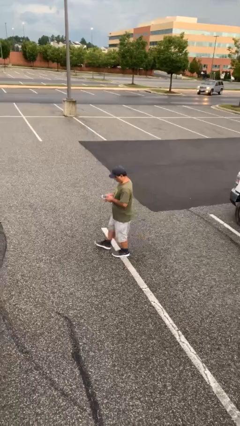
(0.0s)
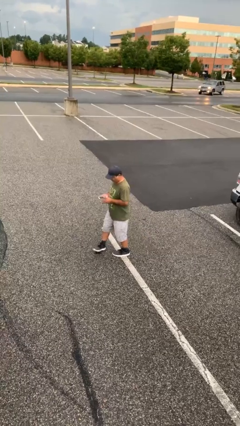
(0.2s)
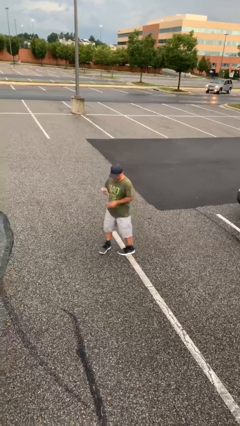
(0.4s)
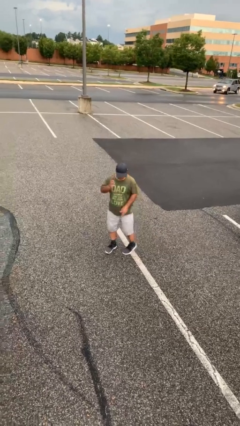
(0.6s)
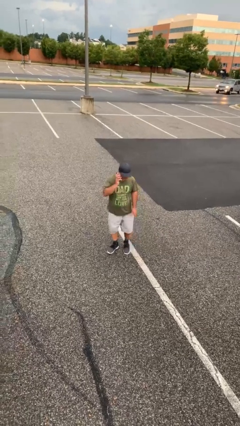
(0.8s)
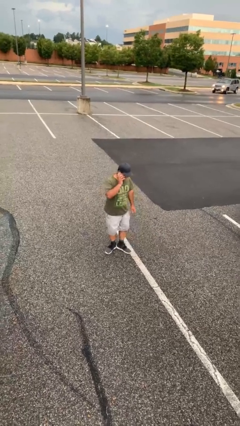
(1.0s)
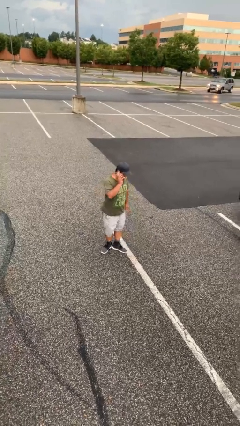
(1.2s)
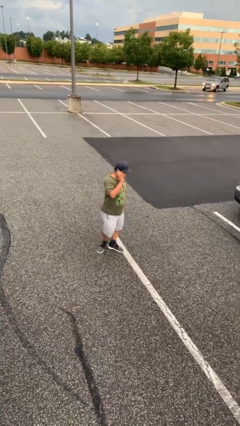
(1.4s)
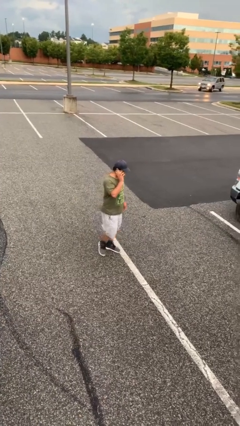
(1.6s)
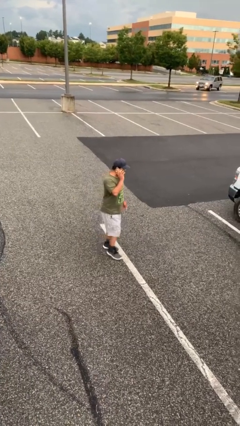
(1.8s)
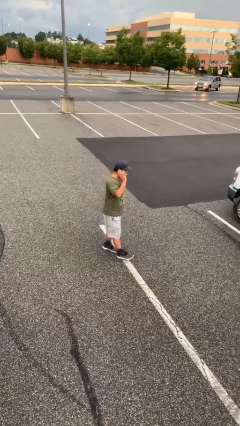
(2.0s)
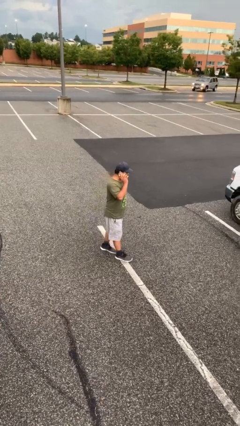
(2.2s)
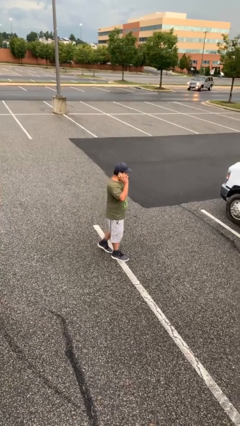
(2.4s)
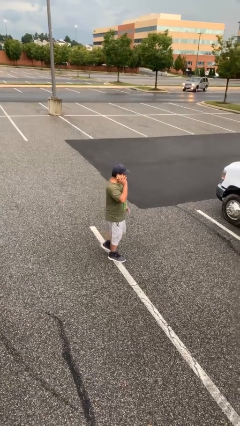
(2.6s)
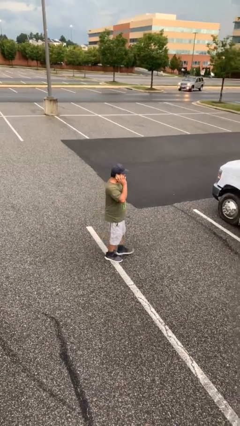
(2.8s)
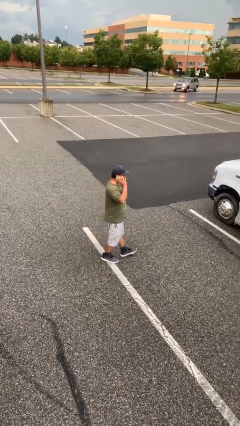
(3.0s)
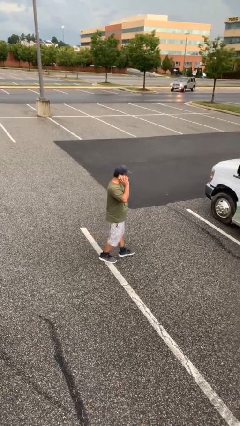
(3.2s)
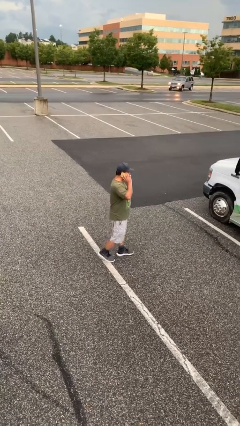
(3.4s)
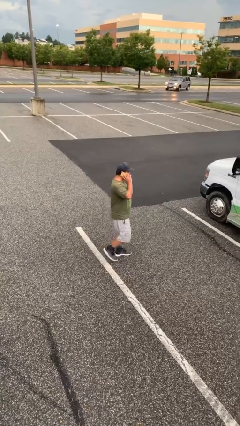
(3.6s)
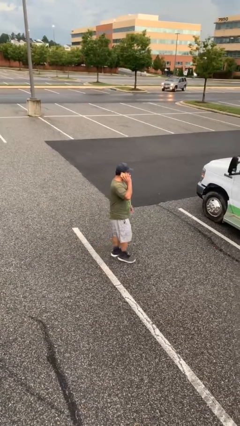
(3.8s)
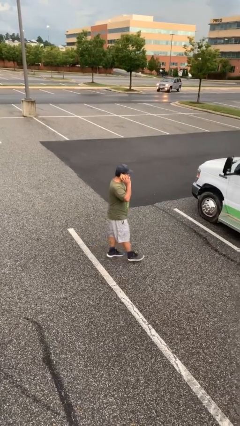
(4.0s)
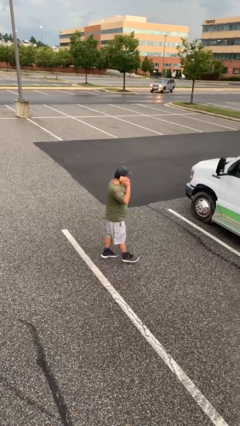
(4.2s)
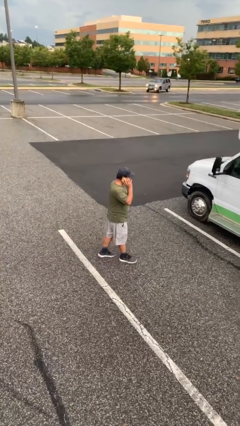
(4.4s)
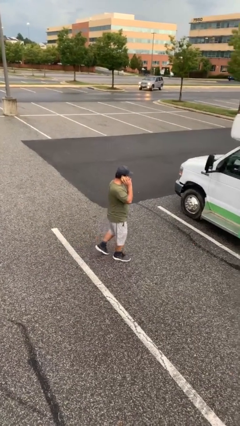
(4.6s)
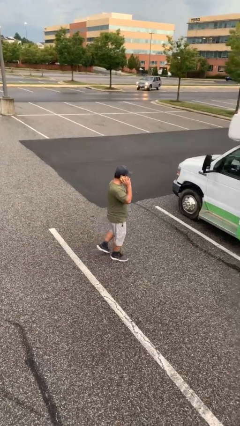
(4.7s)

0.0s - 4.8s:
person talks on phone

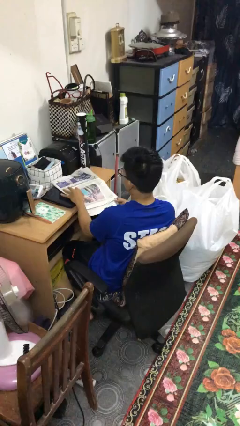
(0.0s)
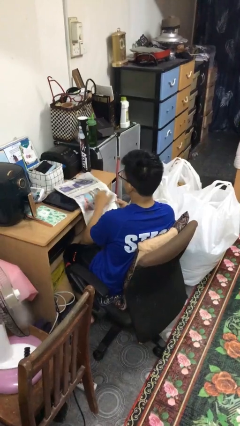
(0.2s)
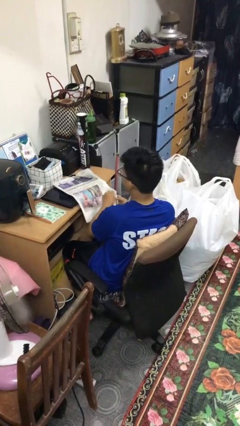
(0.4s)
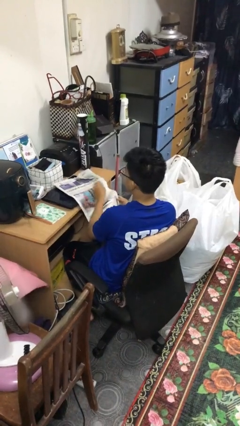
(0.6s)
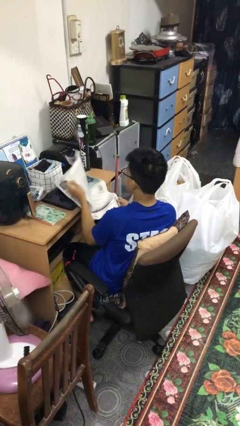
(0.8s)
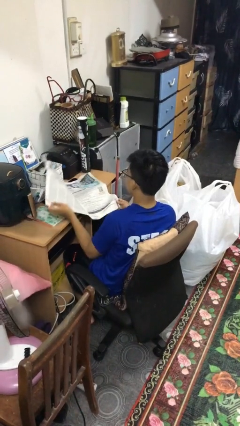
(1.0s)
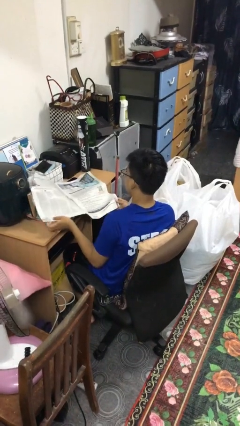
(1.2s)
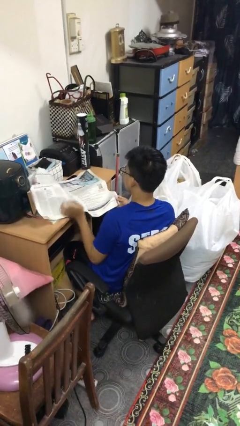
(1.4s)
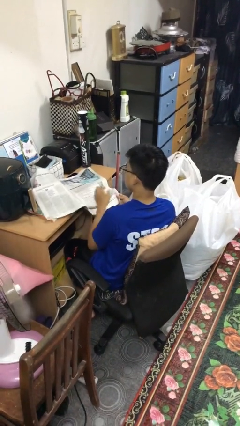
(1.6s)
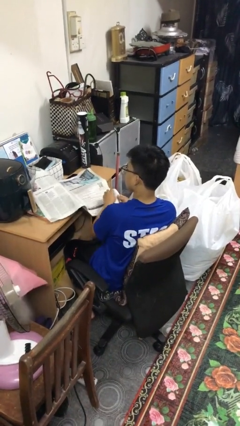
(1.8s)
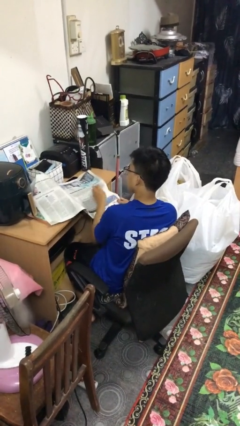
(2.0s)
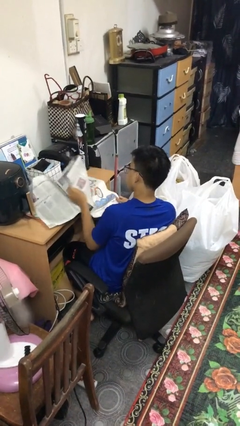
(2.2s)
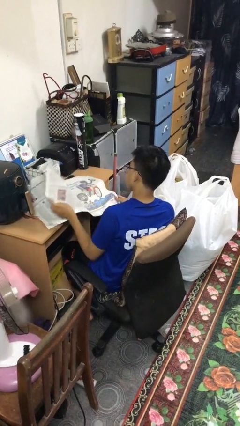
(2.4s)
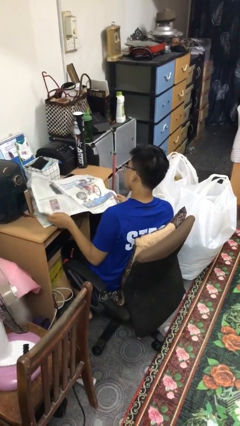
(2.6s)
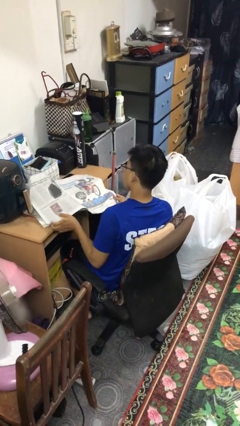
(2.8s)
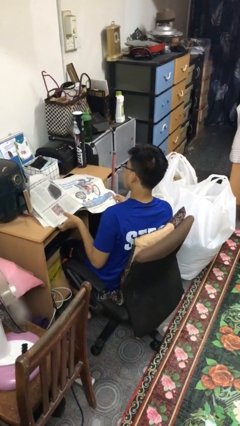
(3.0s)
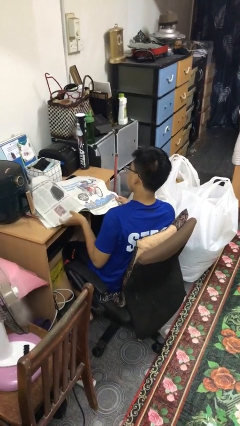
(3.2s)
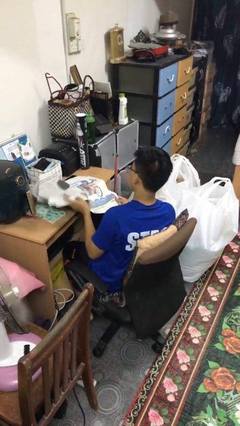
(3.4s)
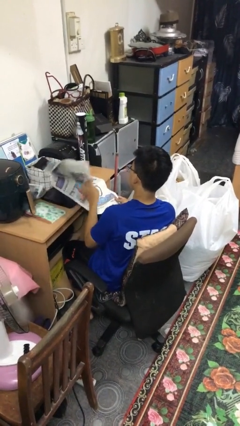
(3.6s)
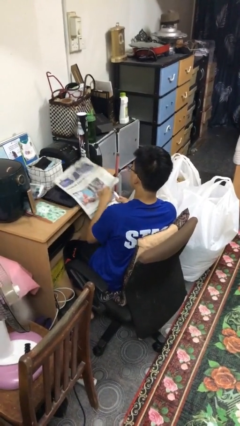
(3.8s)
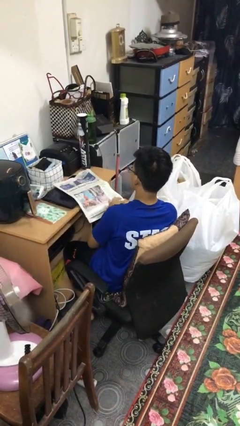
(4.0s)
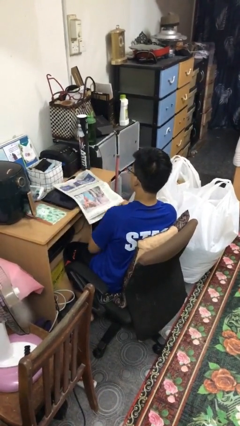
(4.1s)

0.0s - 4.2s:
person reads newspaper

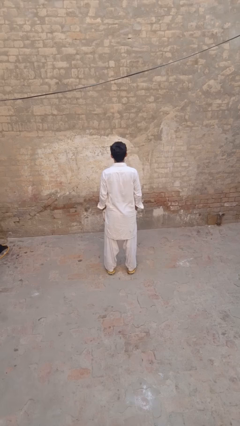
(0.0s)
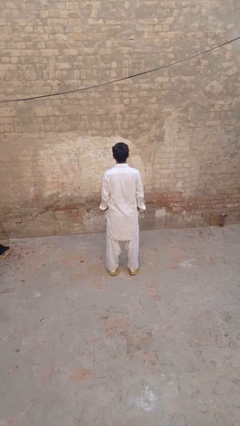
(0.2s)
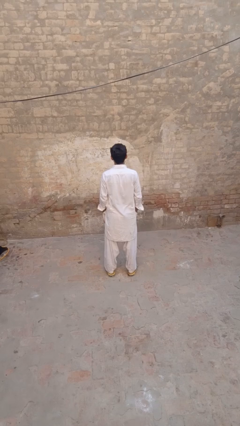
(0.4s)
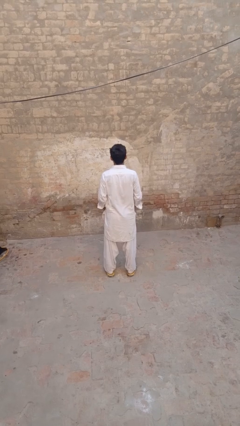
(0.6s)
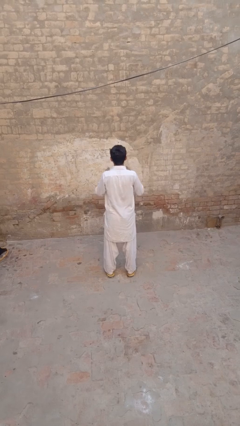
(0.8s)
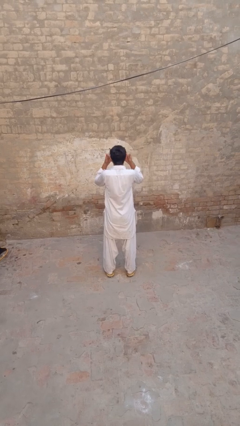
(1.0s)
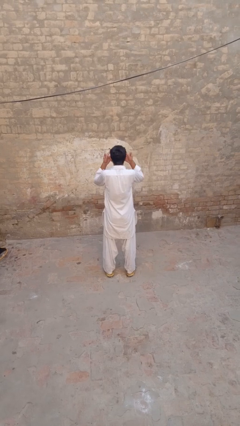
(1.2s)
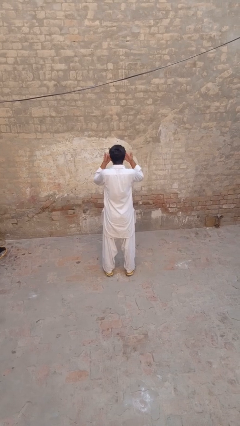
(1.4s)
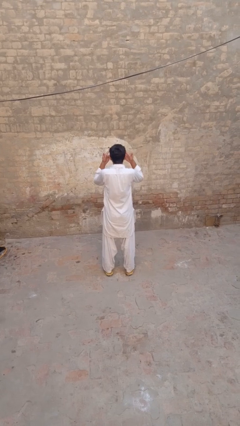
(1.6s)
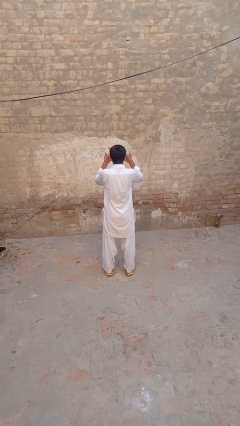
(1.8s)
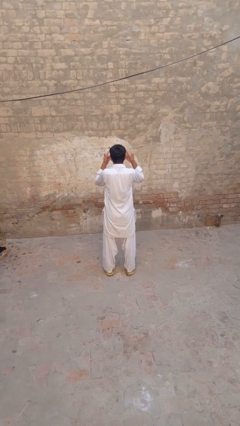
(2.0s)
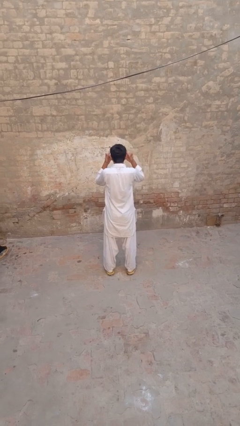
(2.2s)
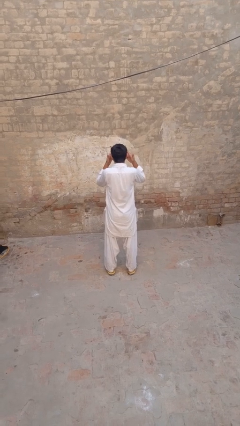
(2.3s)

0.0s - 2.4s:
person shades eyes

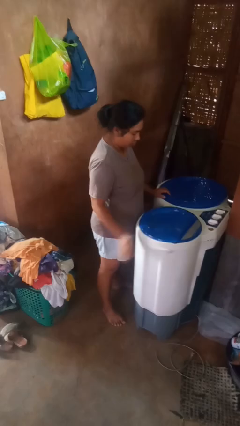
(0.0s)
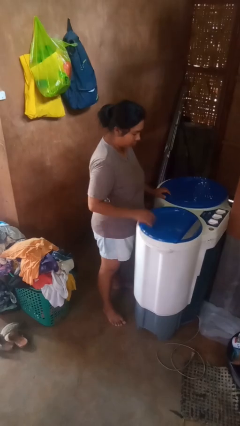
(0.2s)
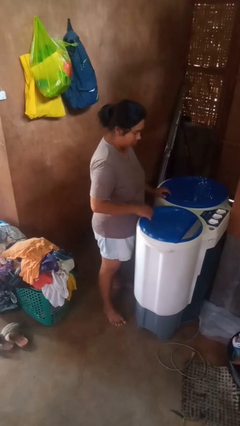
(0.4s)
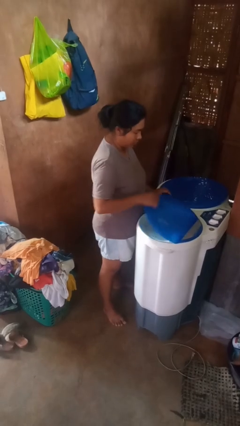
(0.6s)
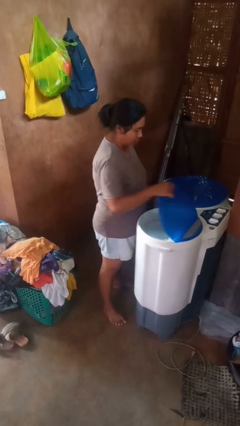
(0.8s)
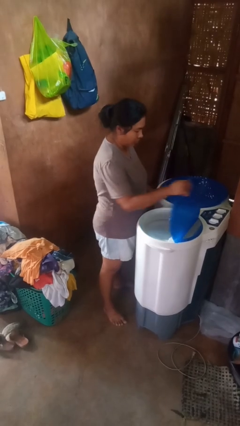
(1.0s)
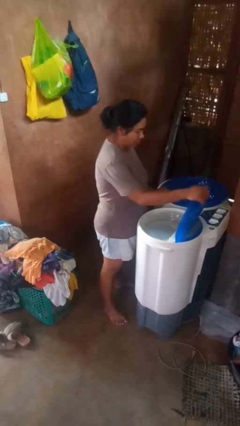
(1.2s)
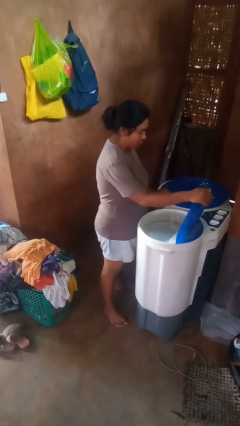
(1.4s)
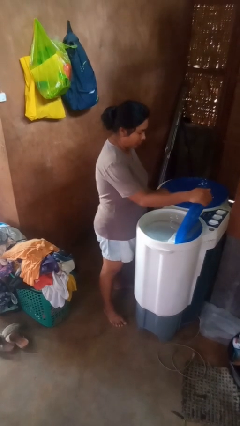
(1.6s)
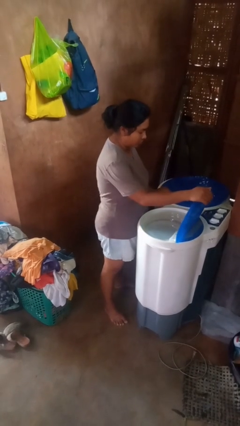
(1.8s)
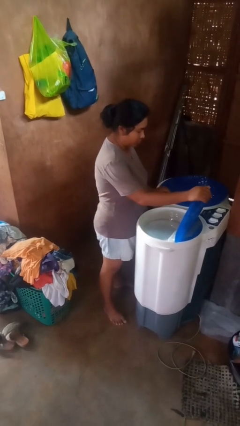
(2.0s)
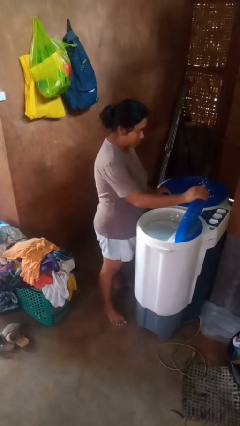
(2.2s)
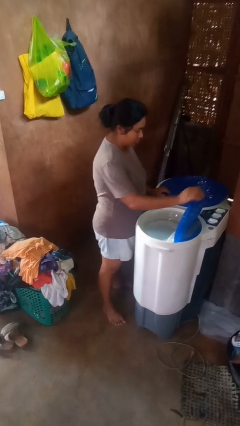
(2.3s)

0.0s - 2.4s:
person opens clothes washer

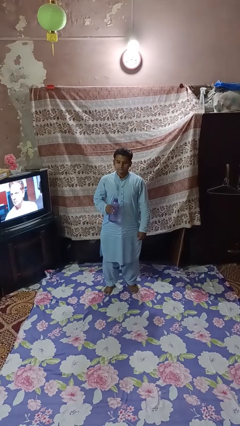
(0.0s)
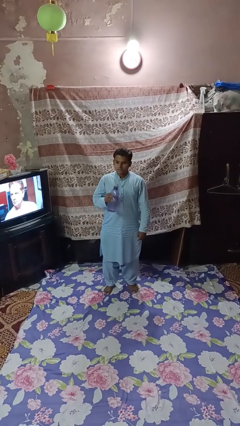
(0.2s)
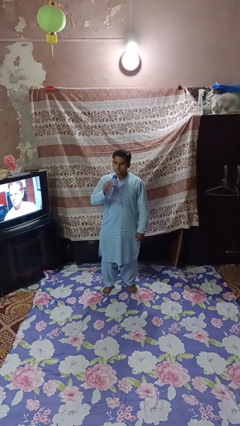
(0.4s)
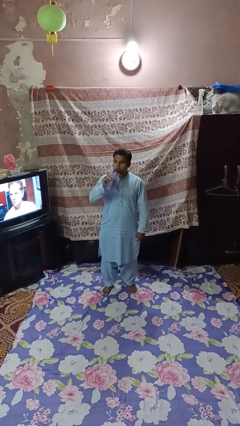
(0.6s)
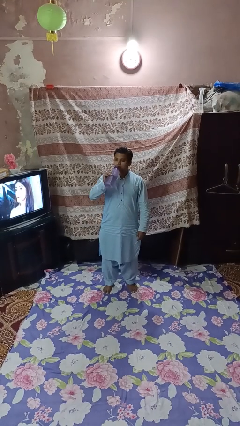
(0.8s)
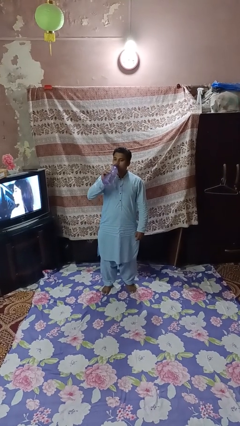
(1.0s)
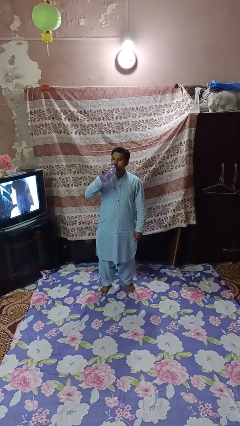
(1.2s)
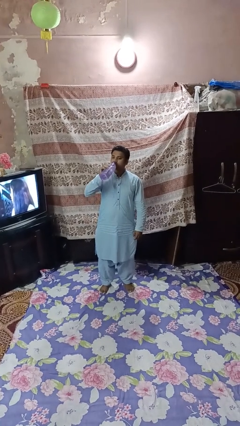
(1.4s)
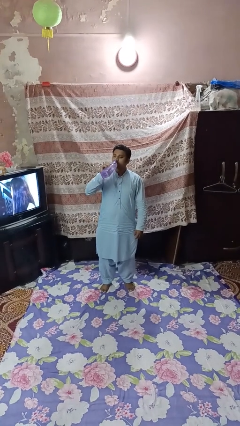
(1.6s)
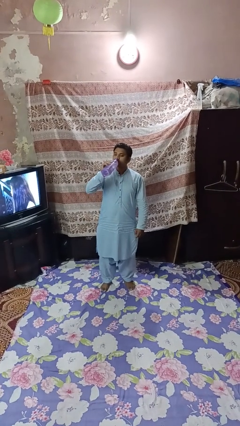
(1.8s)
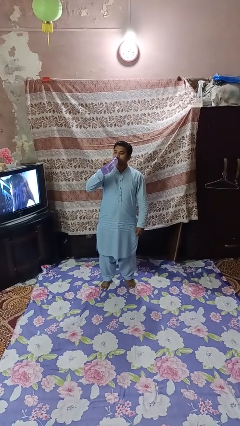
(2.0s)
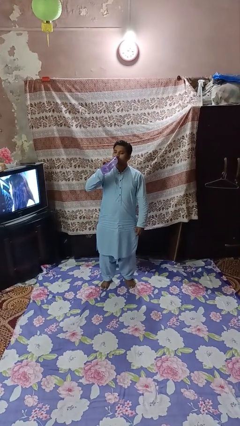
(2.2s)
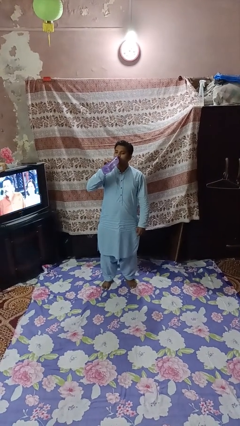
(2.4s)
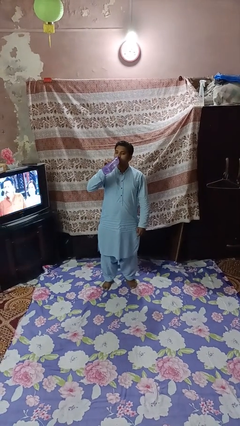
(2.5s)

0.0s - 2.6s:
person drinks from bottle

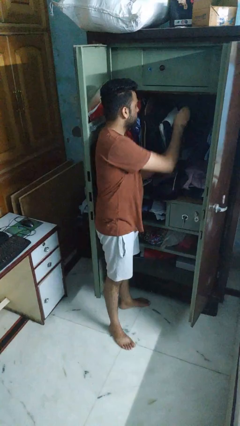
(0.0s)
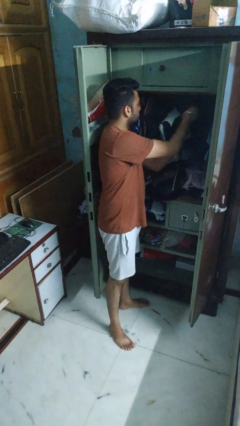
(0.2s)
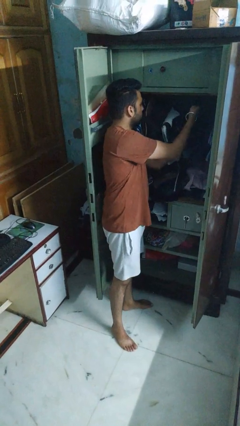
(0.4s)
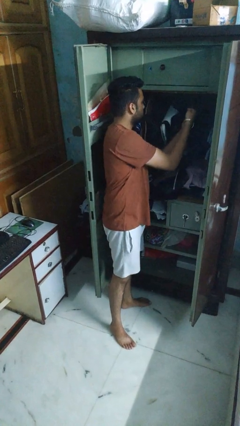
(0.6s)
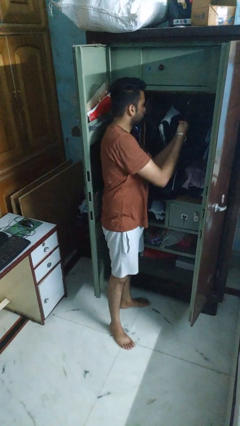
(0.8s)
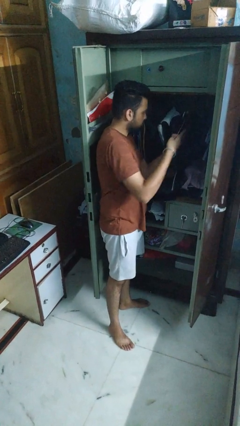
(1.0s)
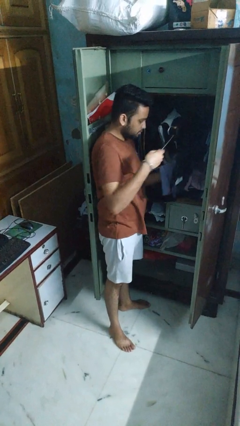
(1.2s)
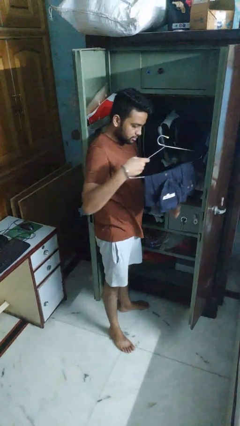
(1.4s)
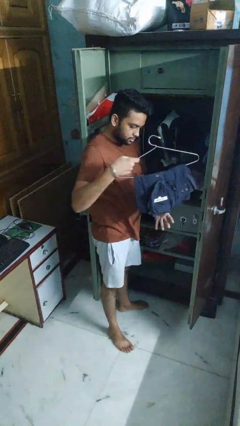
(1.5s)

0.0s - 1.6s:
person takes clothes from closet
